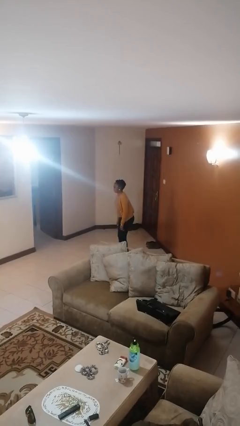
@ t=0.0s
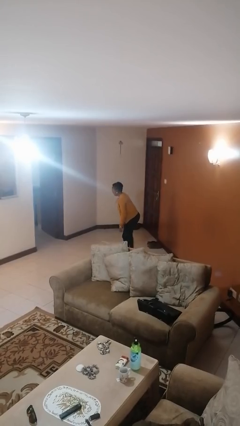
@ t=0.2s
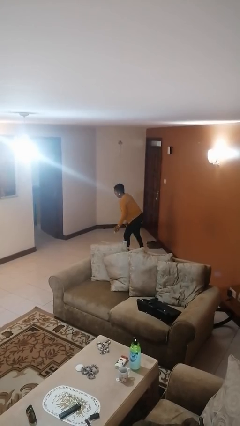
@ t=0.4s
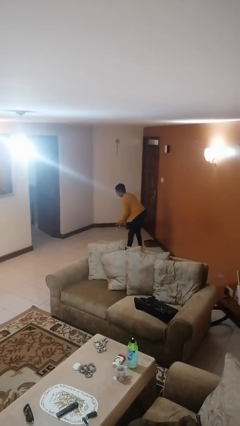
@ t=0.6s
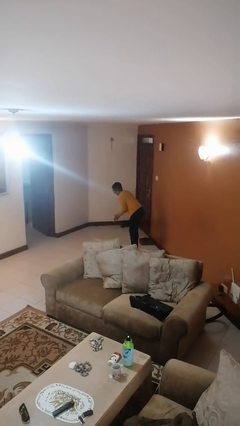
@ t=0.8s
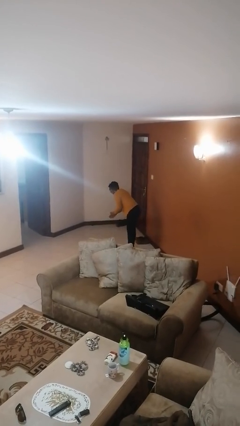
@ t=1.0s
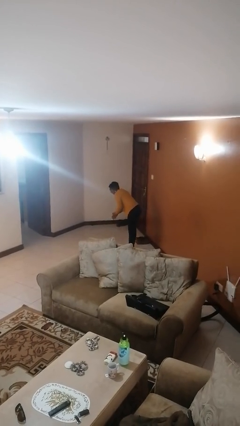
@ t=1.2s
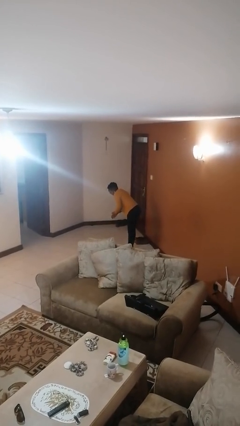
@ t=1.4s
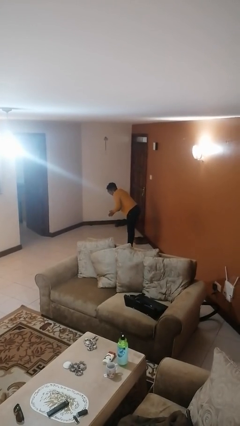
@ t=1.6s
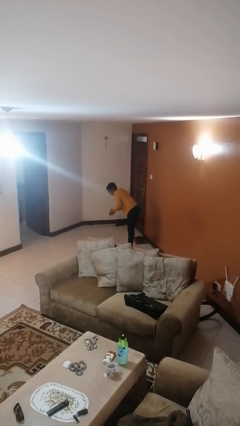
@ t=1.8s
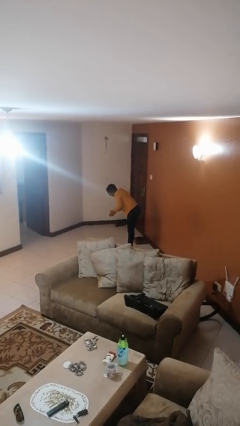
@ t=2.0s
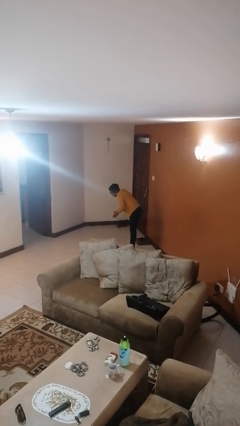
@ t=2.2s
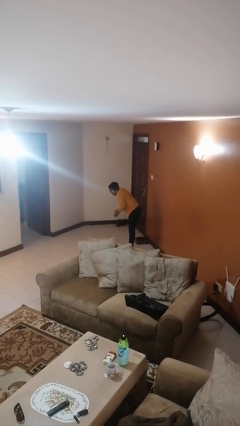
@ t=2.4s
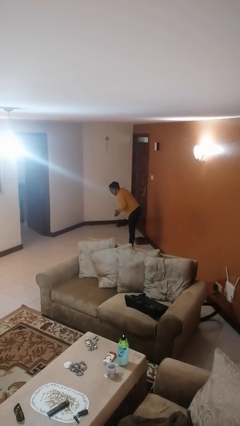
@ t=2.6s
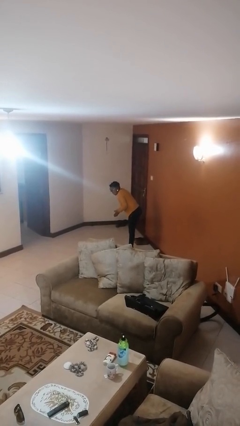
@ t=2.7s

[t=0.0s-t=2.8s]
person claps hands

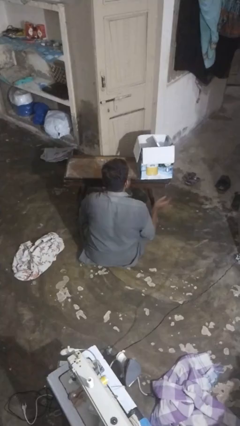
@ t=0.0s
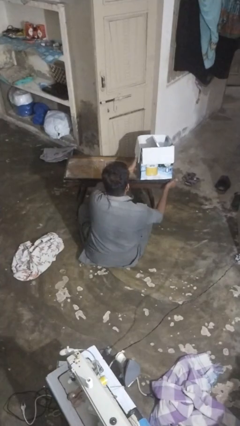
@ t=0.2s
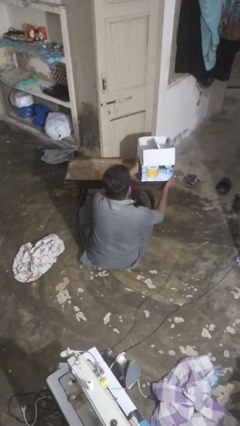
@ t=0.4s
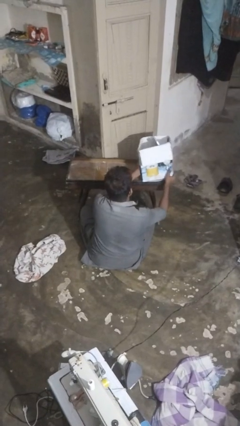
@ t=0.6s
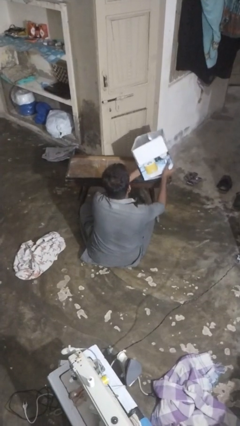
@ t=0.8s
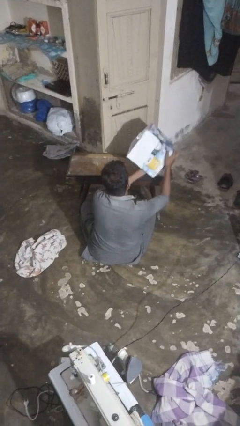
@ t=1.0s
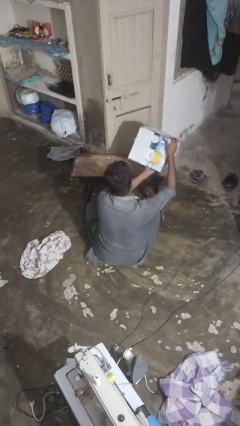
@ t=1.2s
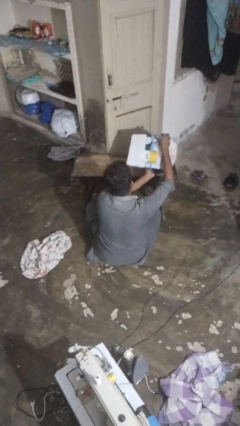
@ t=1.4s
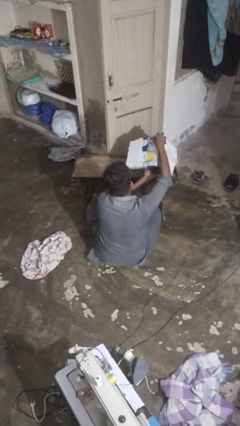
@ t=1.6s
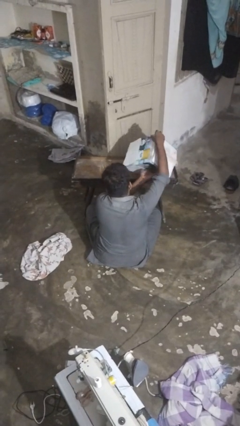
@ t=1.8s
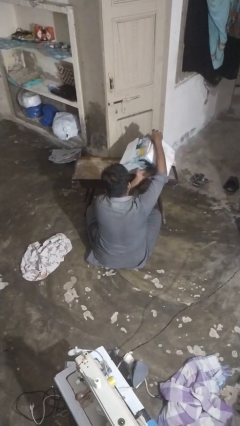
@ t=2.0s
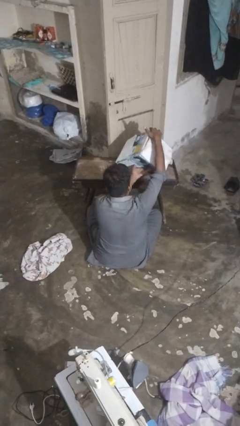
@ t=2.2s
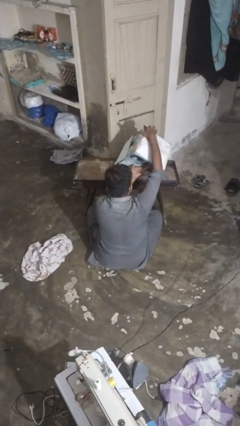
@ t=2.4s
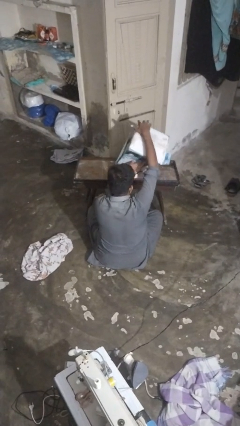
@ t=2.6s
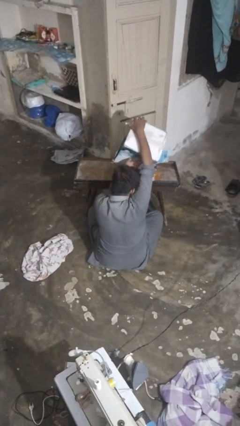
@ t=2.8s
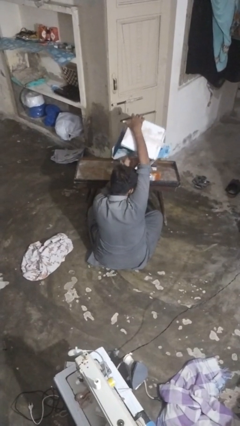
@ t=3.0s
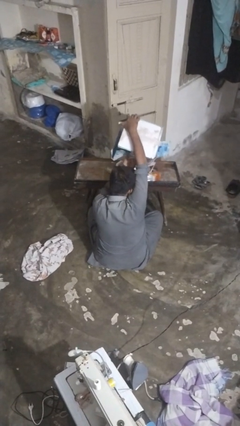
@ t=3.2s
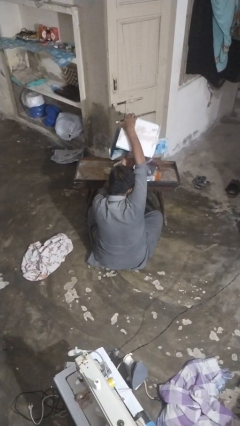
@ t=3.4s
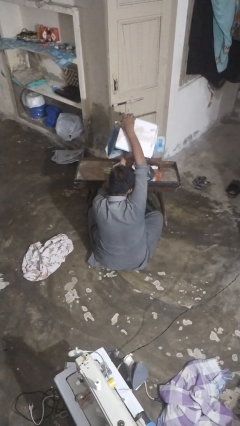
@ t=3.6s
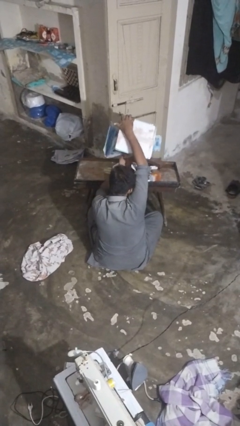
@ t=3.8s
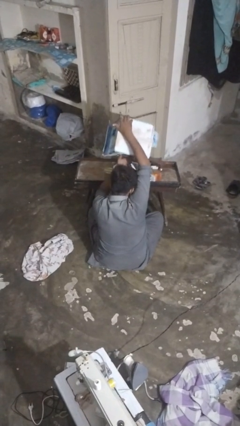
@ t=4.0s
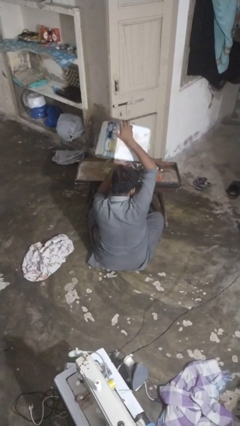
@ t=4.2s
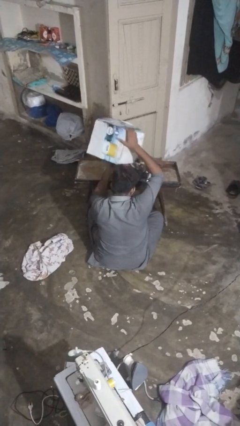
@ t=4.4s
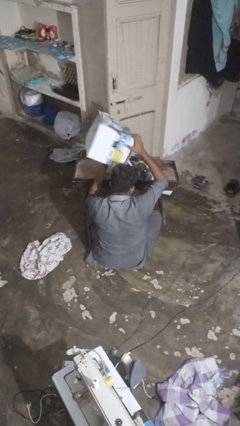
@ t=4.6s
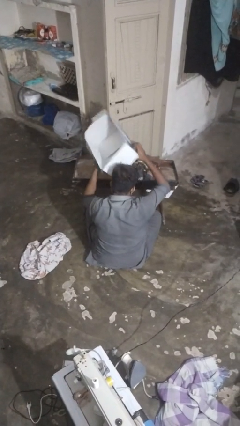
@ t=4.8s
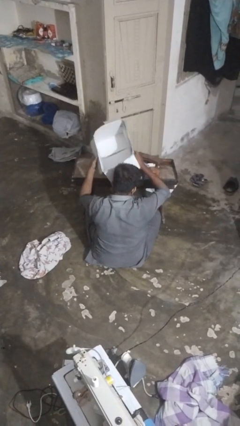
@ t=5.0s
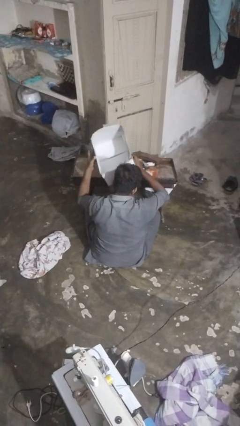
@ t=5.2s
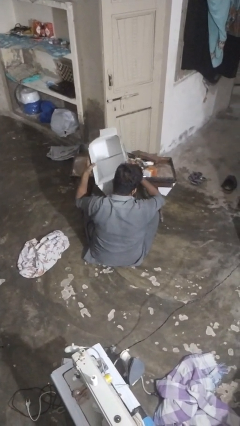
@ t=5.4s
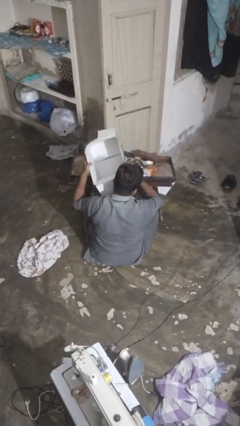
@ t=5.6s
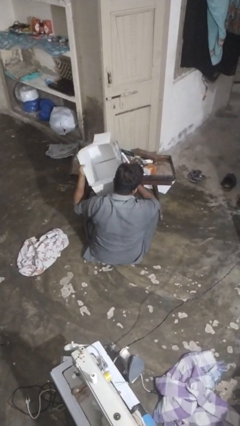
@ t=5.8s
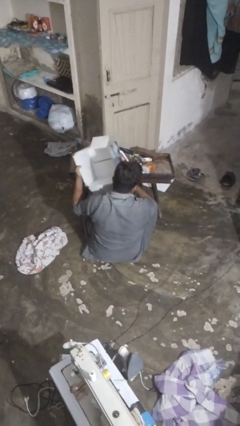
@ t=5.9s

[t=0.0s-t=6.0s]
person unloads box onto table

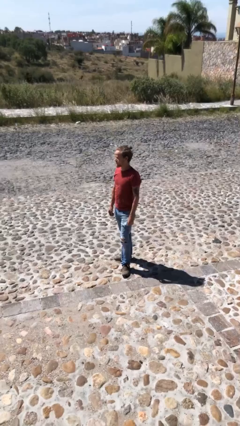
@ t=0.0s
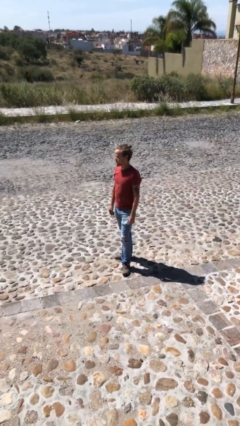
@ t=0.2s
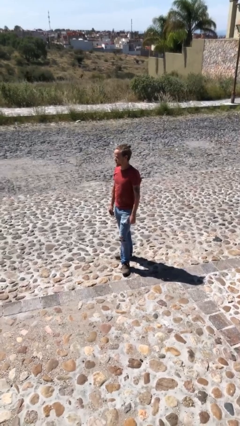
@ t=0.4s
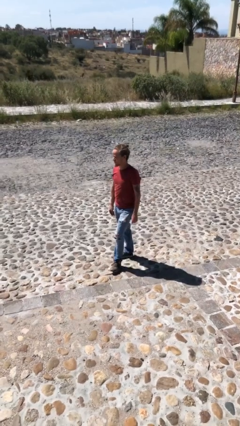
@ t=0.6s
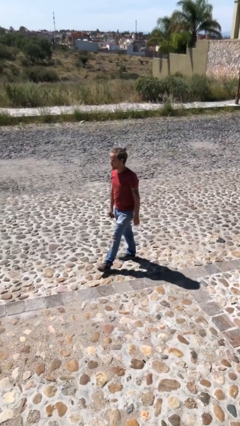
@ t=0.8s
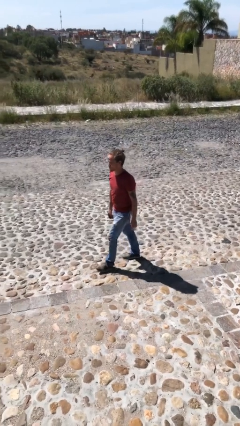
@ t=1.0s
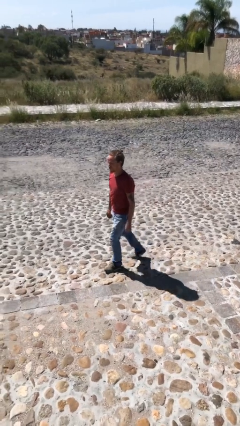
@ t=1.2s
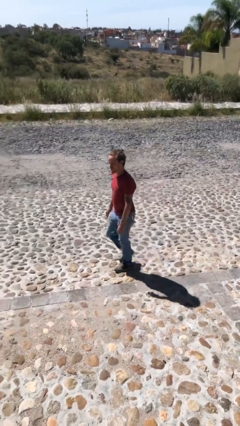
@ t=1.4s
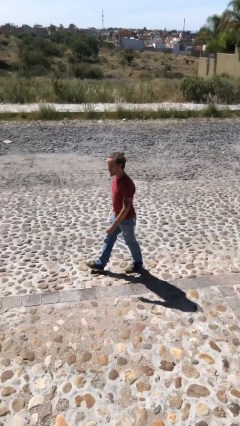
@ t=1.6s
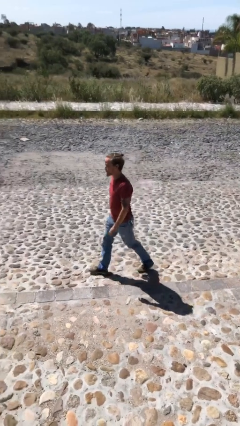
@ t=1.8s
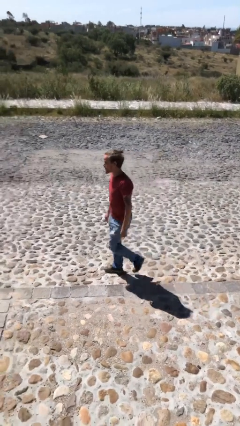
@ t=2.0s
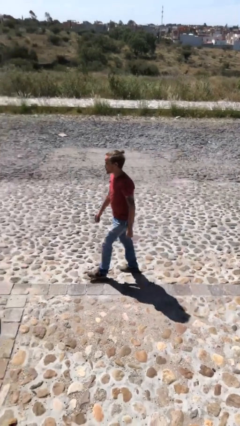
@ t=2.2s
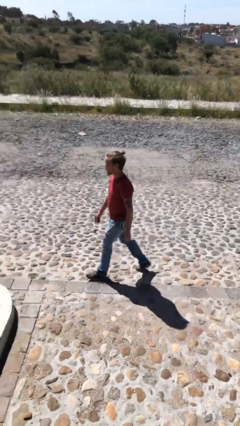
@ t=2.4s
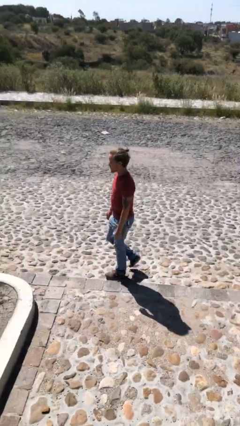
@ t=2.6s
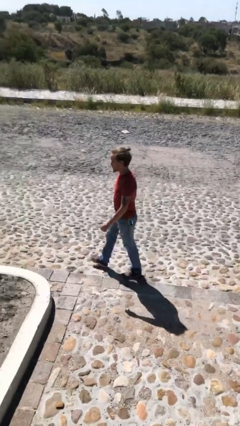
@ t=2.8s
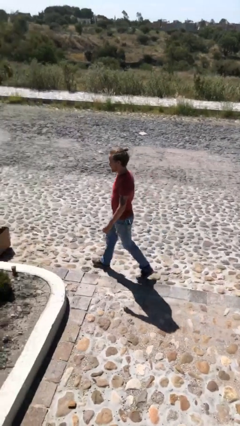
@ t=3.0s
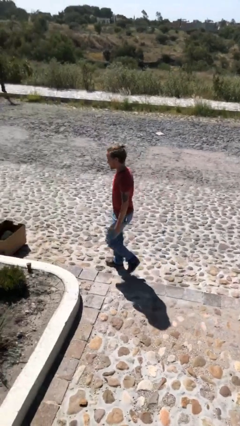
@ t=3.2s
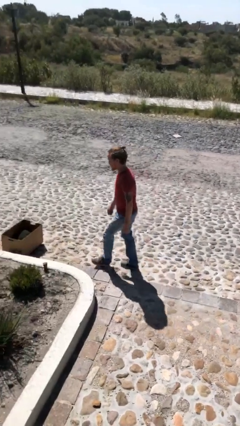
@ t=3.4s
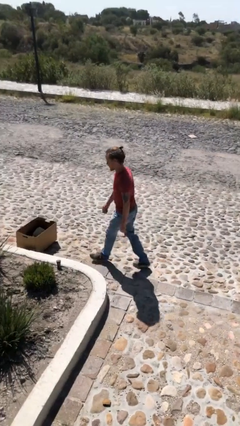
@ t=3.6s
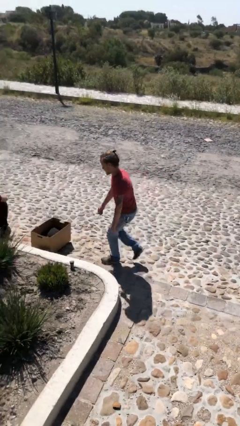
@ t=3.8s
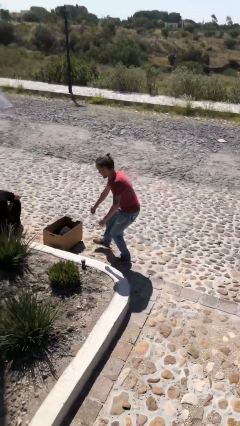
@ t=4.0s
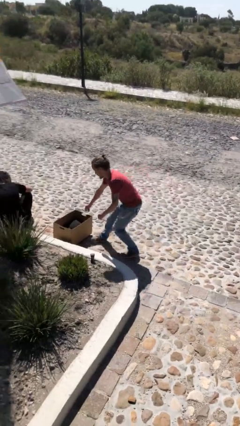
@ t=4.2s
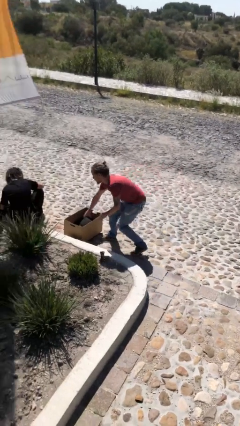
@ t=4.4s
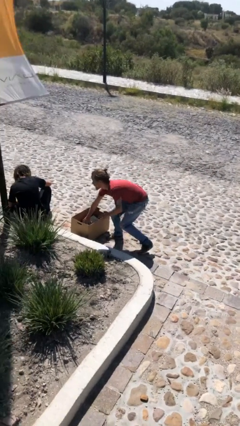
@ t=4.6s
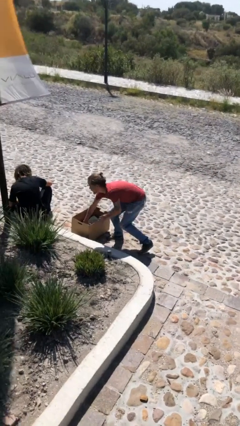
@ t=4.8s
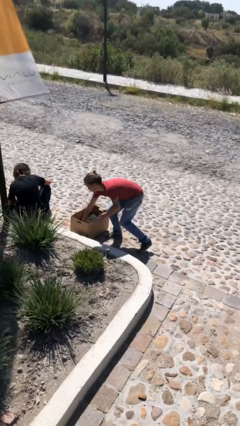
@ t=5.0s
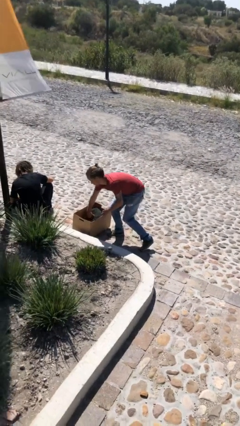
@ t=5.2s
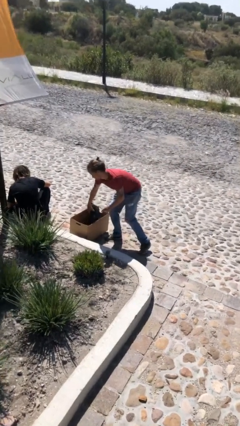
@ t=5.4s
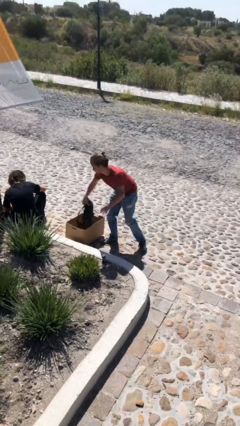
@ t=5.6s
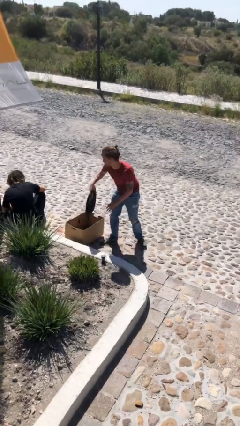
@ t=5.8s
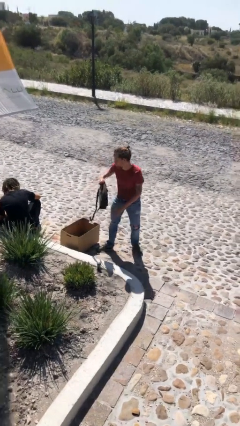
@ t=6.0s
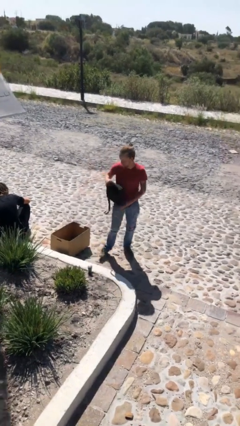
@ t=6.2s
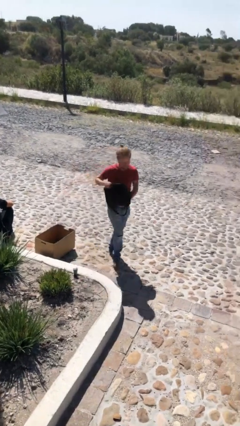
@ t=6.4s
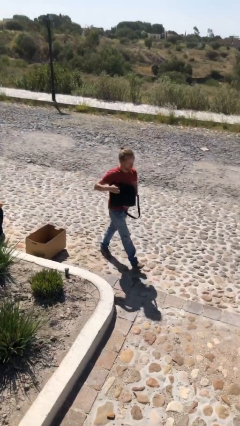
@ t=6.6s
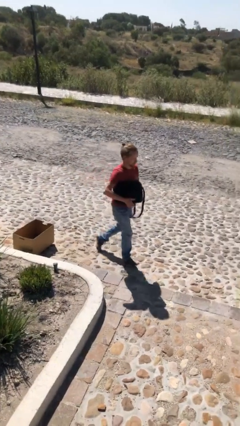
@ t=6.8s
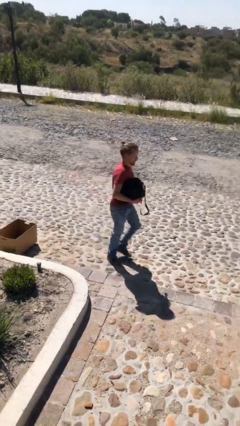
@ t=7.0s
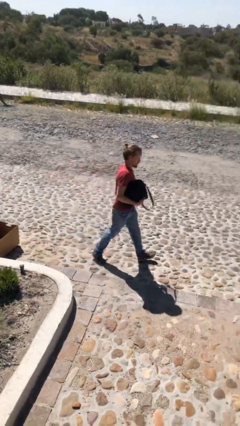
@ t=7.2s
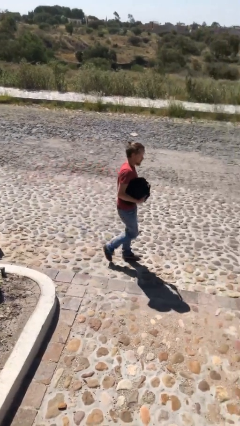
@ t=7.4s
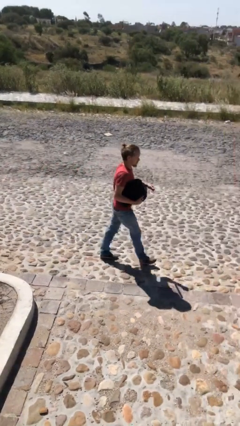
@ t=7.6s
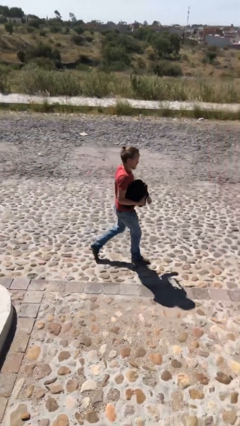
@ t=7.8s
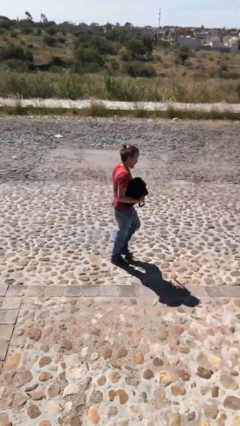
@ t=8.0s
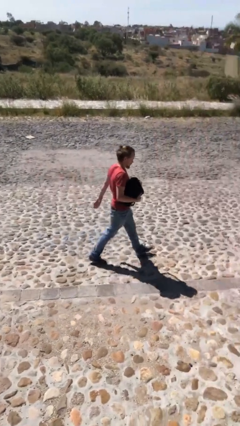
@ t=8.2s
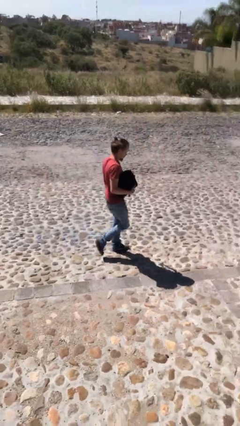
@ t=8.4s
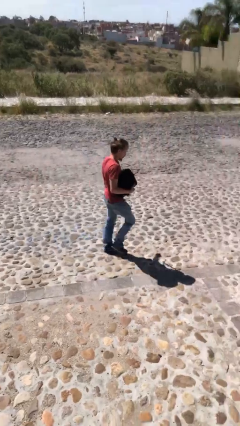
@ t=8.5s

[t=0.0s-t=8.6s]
person steals object from person
